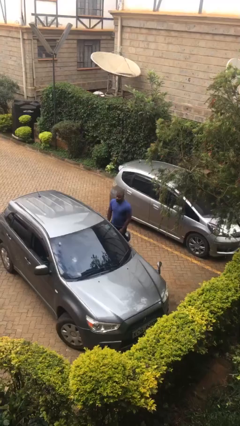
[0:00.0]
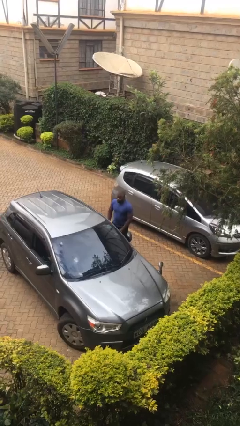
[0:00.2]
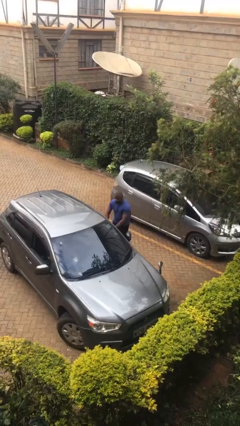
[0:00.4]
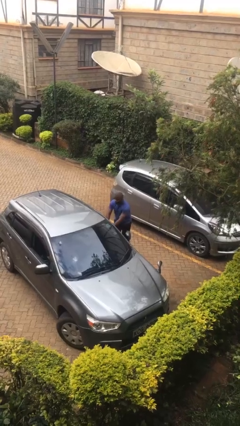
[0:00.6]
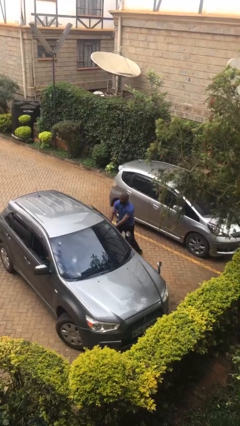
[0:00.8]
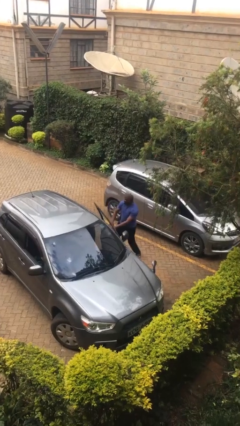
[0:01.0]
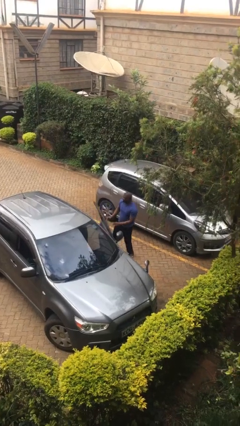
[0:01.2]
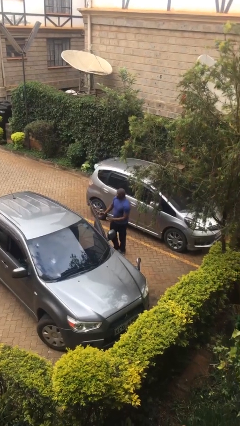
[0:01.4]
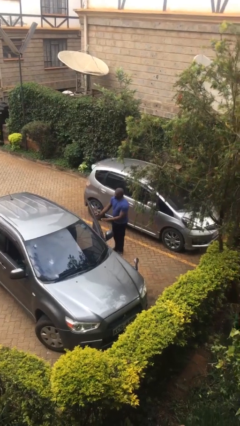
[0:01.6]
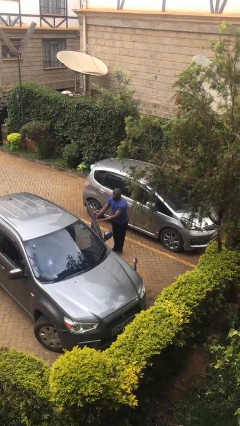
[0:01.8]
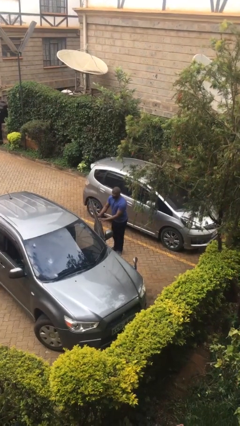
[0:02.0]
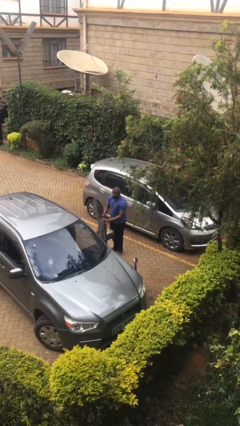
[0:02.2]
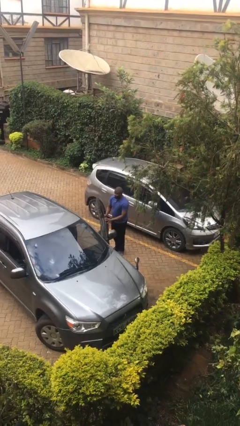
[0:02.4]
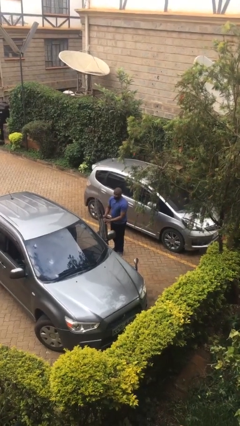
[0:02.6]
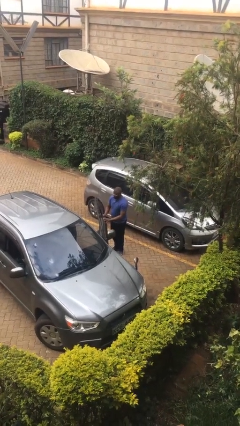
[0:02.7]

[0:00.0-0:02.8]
person opens car door

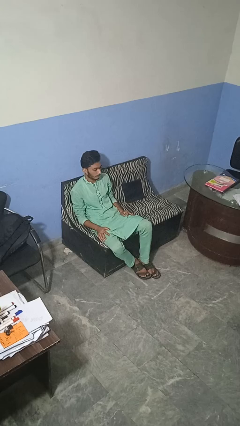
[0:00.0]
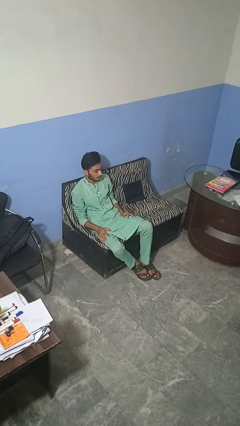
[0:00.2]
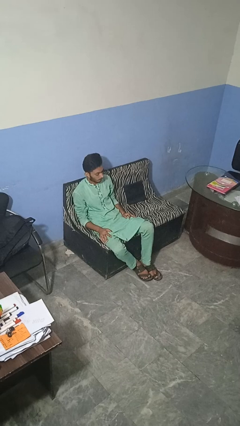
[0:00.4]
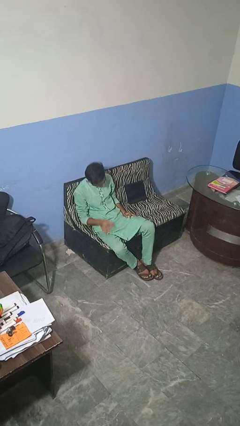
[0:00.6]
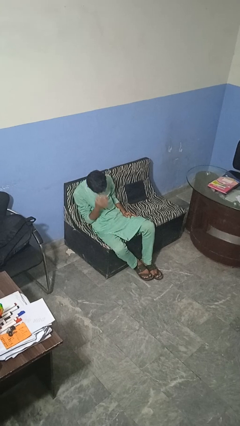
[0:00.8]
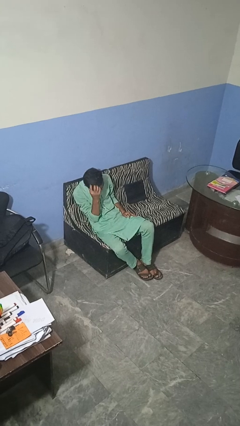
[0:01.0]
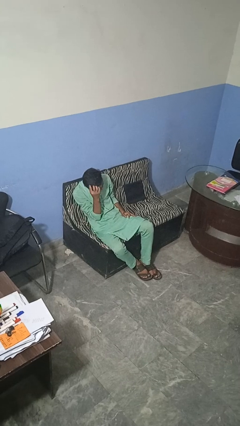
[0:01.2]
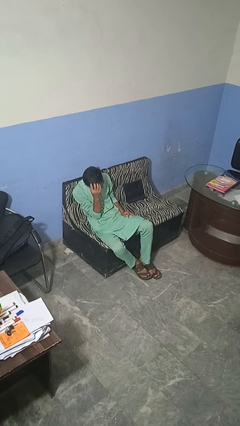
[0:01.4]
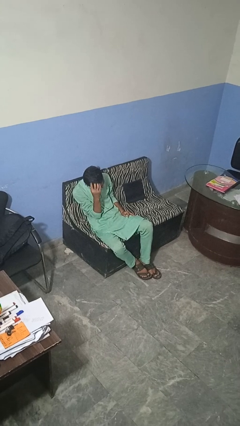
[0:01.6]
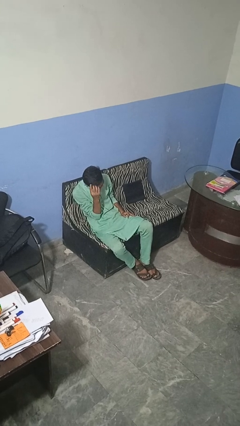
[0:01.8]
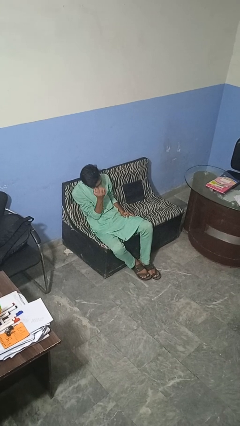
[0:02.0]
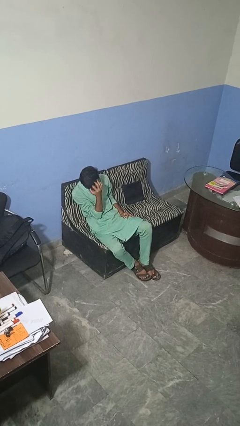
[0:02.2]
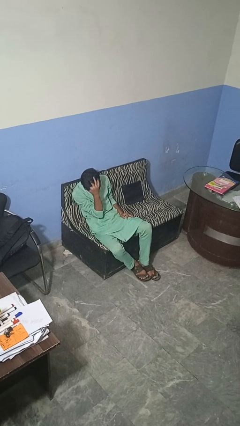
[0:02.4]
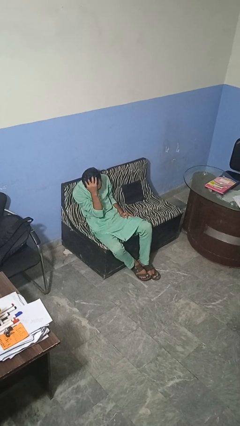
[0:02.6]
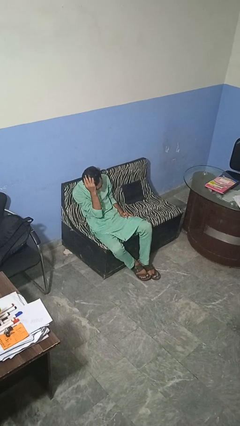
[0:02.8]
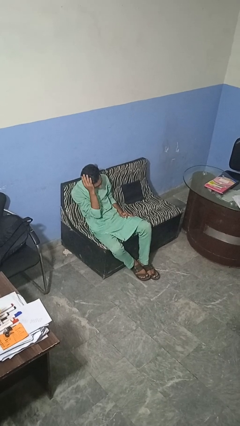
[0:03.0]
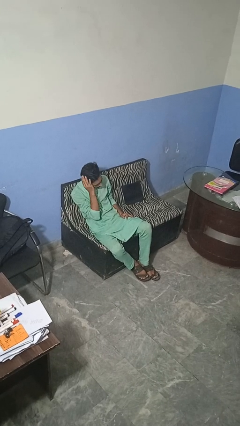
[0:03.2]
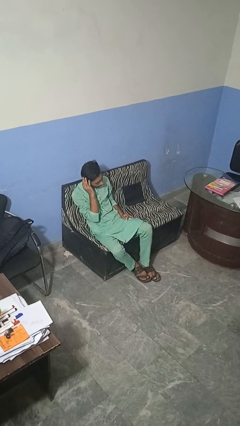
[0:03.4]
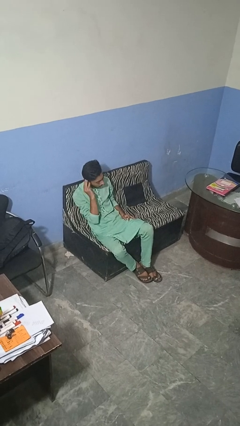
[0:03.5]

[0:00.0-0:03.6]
person strokes hair

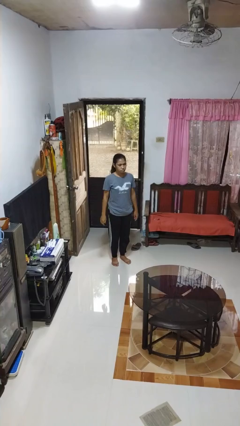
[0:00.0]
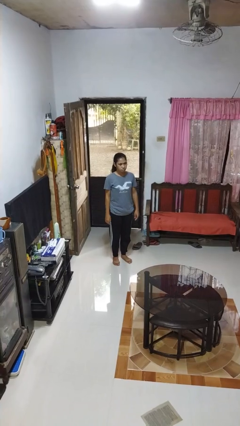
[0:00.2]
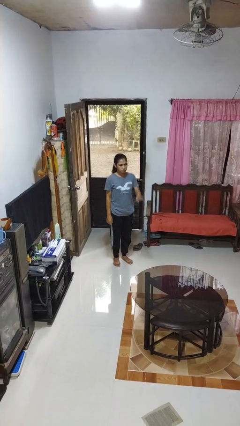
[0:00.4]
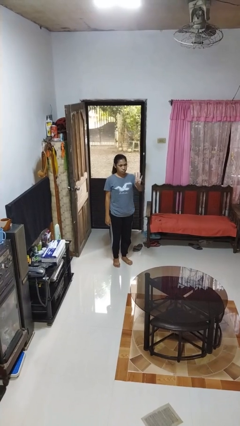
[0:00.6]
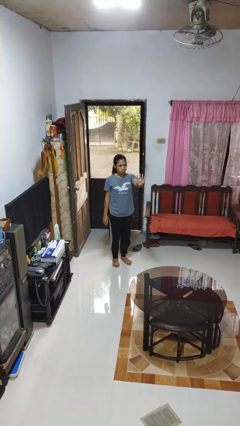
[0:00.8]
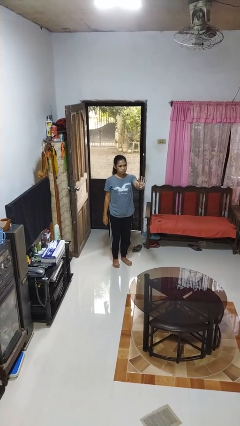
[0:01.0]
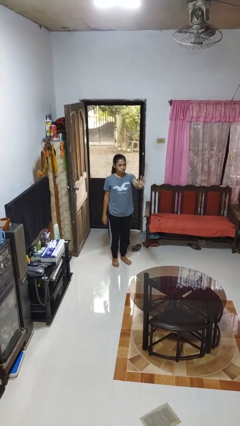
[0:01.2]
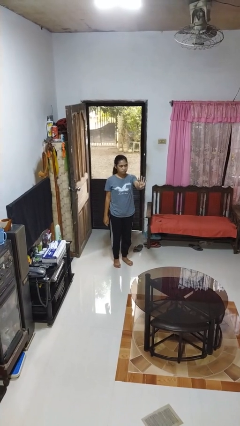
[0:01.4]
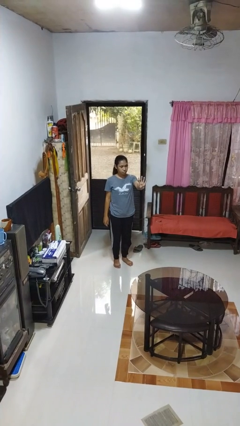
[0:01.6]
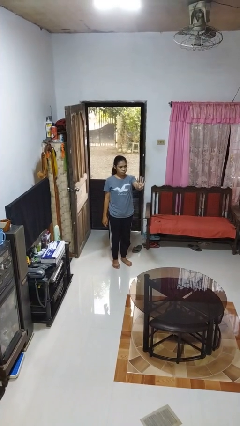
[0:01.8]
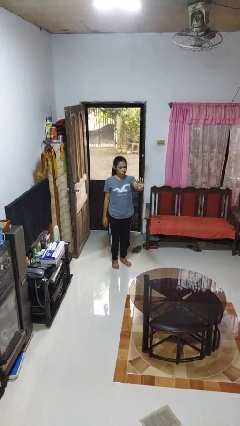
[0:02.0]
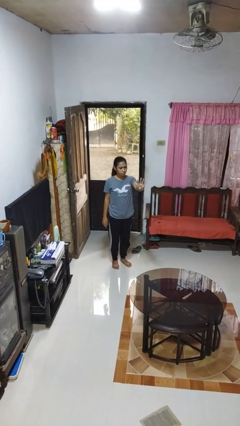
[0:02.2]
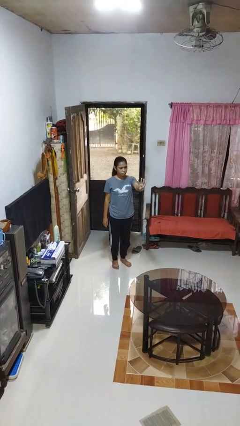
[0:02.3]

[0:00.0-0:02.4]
person gestures number four

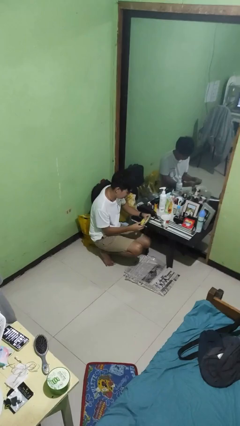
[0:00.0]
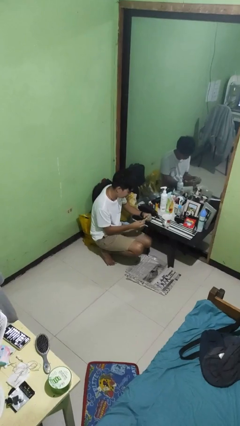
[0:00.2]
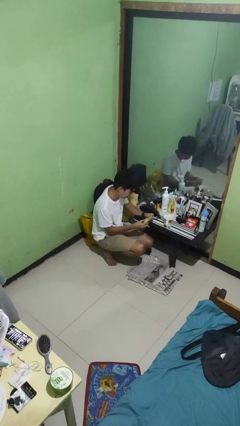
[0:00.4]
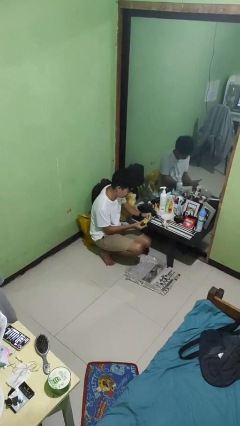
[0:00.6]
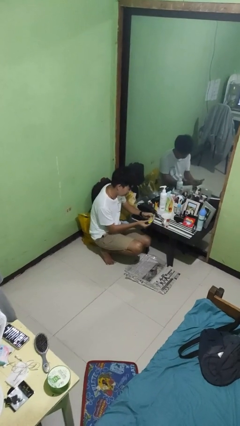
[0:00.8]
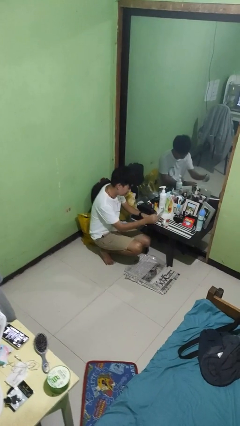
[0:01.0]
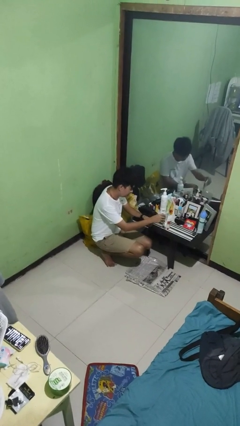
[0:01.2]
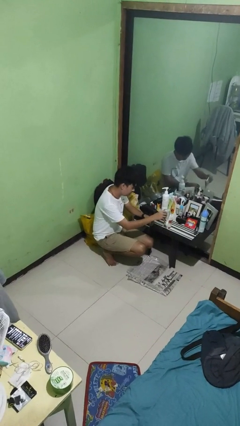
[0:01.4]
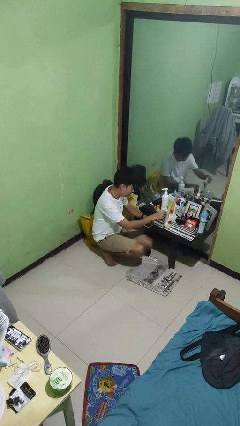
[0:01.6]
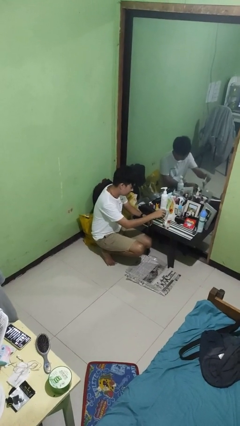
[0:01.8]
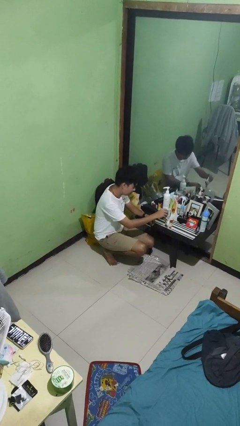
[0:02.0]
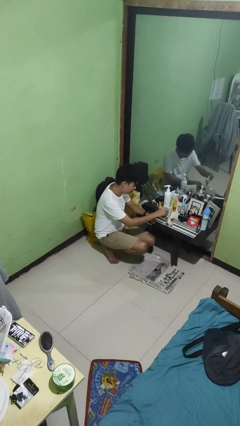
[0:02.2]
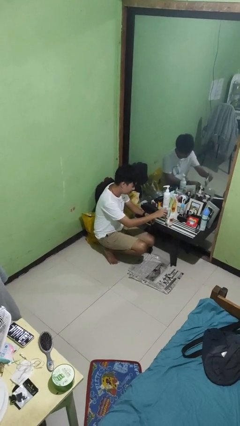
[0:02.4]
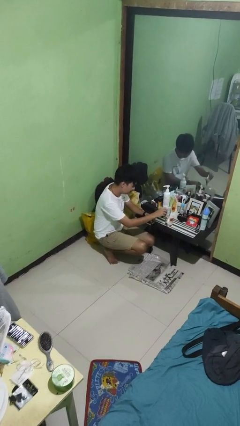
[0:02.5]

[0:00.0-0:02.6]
person pours coffee into mug

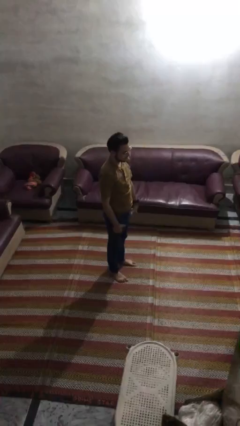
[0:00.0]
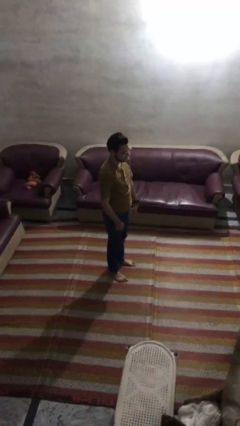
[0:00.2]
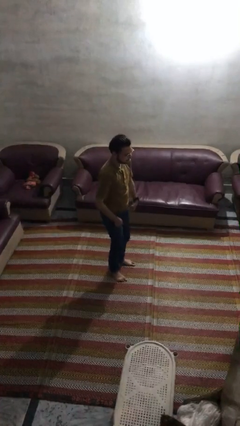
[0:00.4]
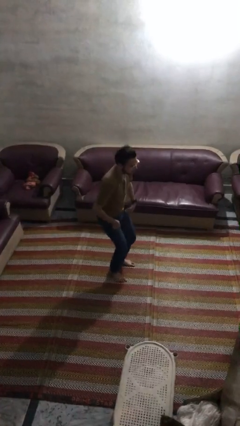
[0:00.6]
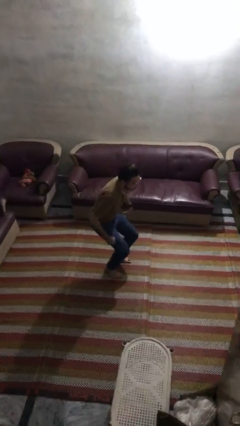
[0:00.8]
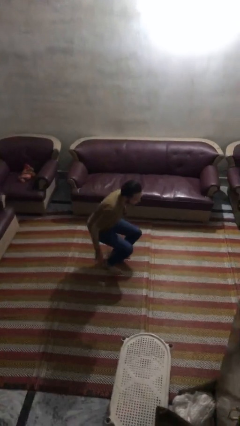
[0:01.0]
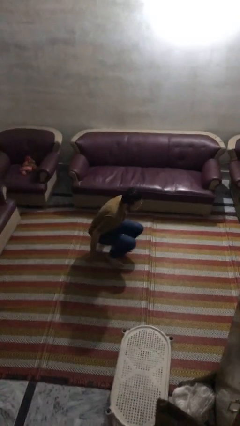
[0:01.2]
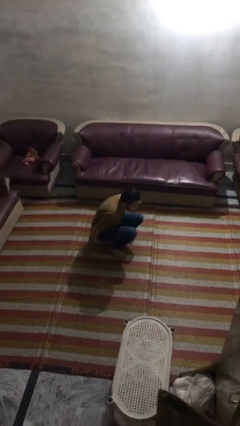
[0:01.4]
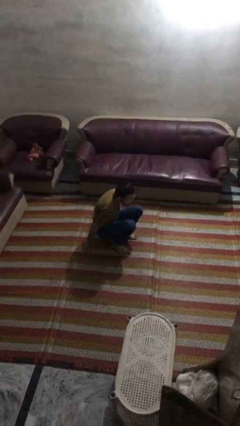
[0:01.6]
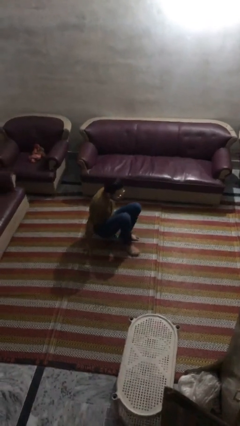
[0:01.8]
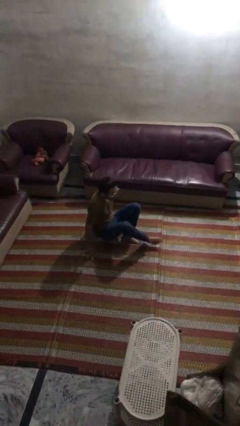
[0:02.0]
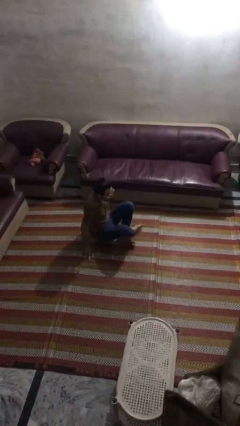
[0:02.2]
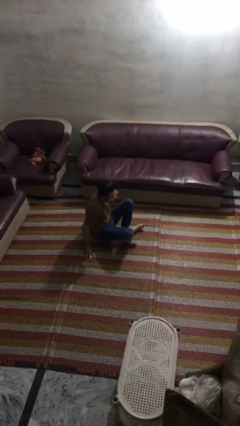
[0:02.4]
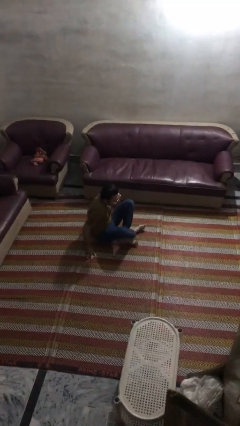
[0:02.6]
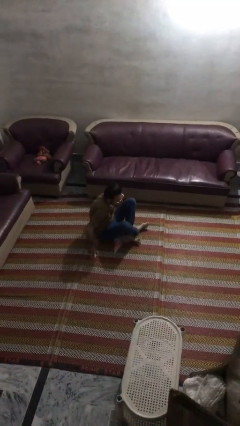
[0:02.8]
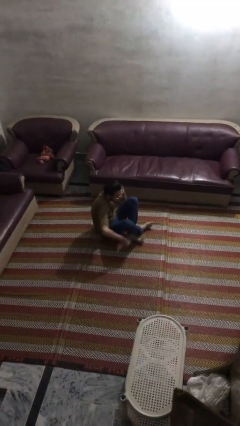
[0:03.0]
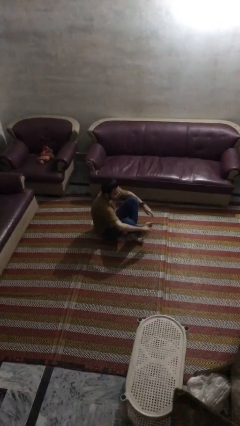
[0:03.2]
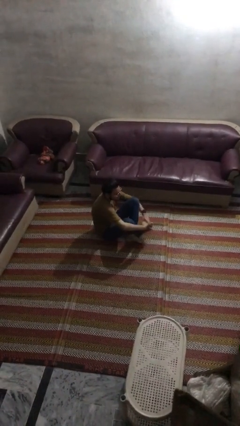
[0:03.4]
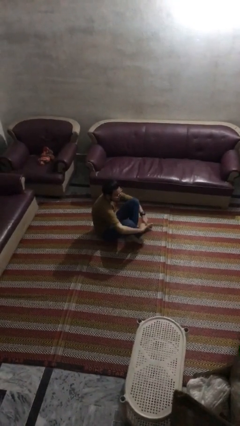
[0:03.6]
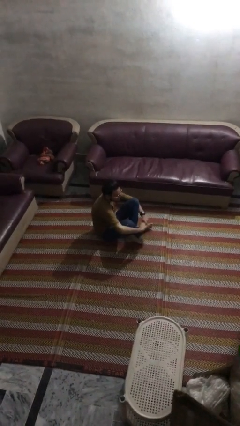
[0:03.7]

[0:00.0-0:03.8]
person sits crisscross

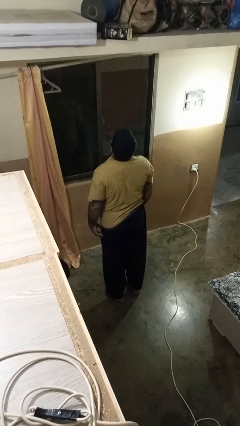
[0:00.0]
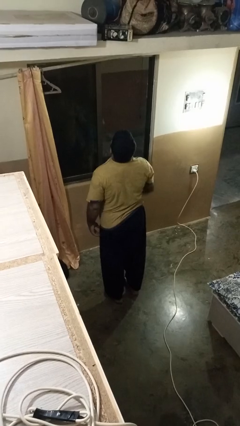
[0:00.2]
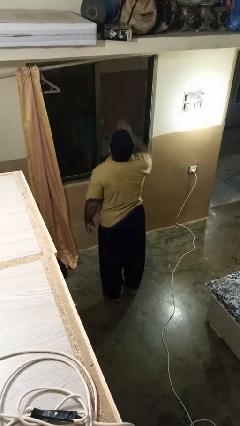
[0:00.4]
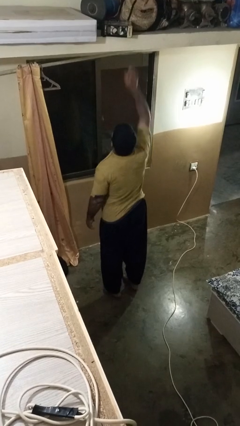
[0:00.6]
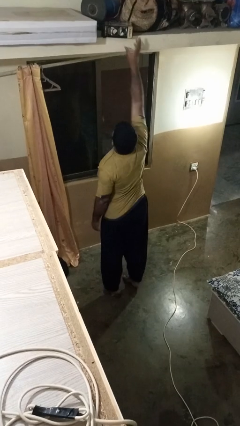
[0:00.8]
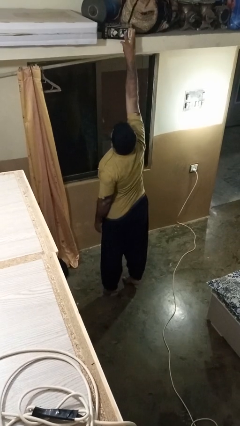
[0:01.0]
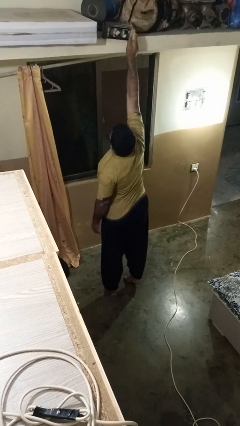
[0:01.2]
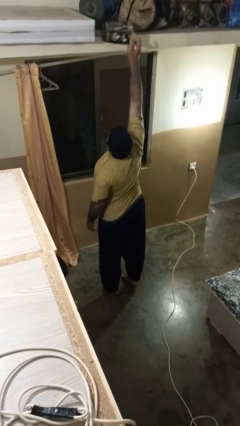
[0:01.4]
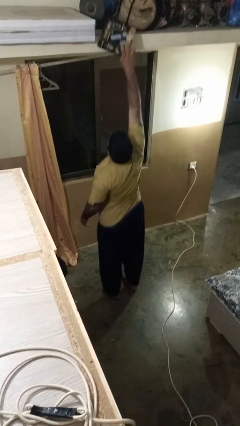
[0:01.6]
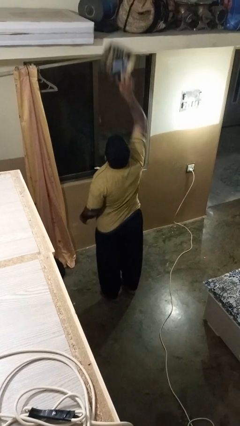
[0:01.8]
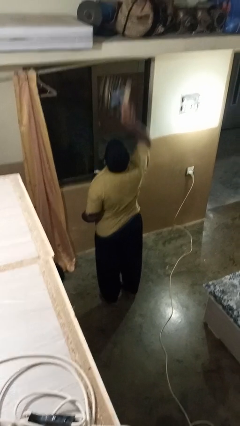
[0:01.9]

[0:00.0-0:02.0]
person picks up object from shelf
